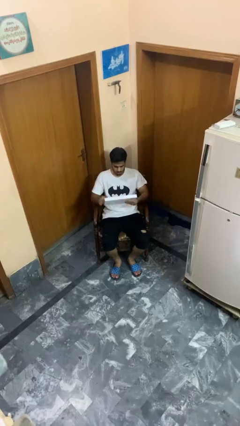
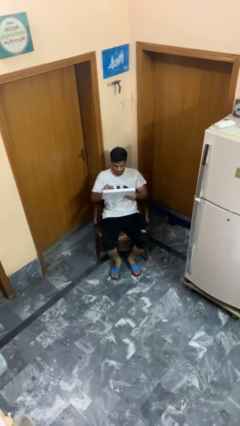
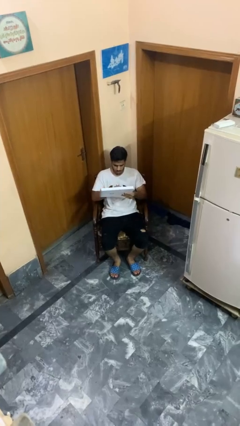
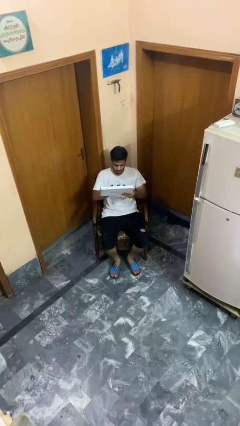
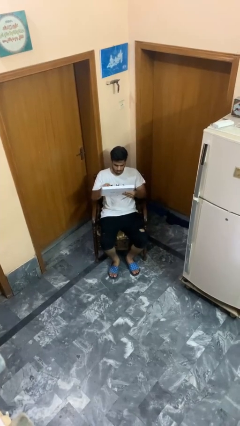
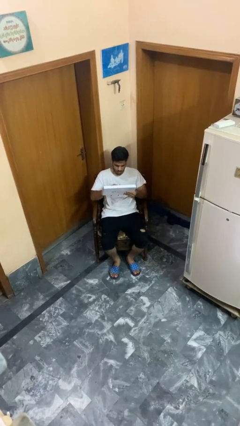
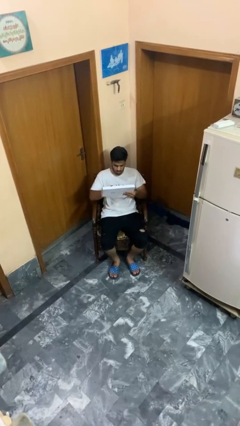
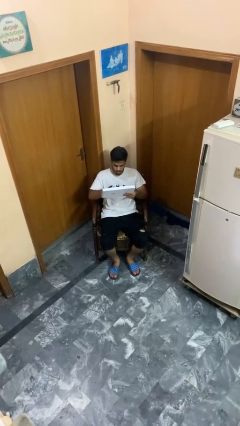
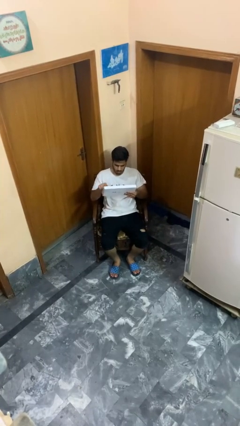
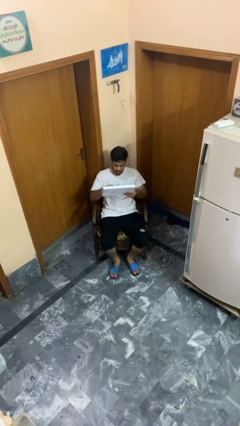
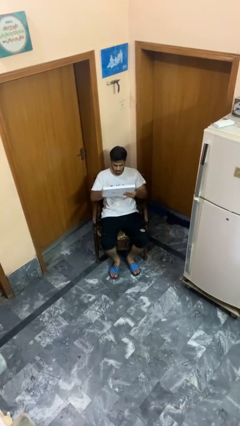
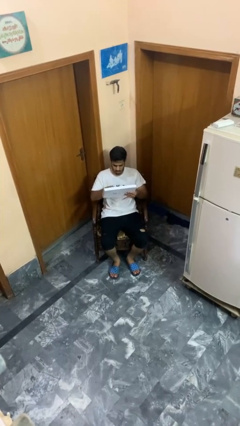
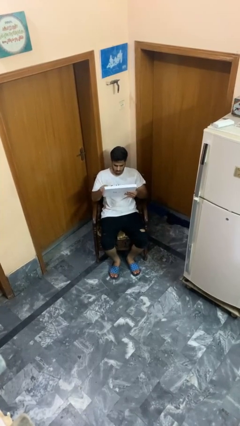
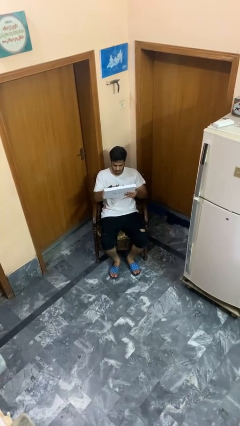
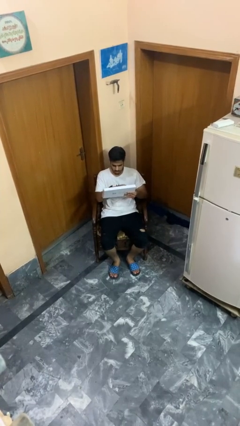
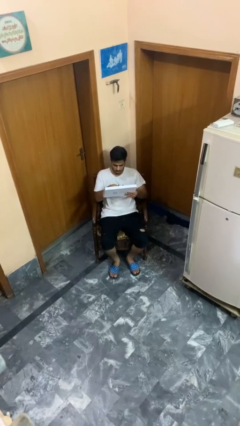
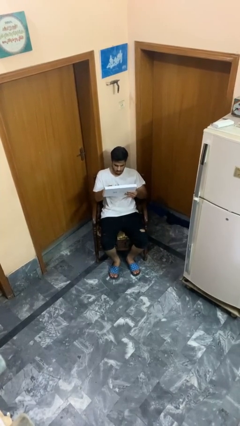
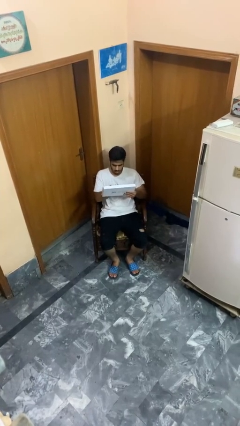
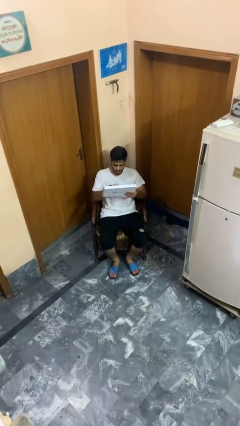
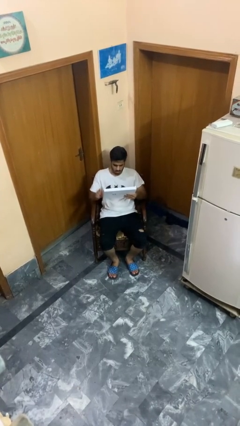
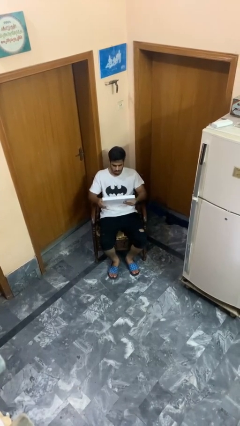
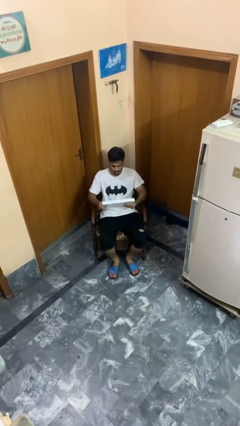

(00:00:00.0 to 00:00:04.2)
person interacts with tablet

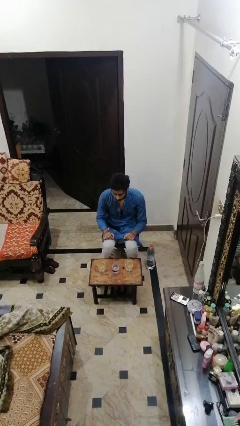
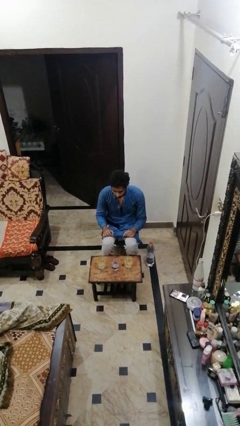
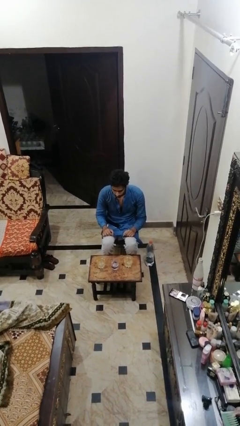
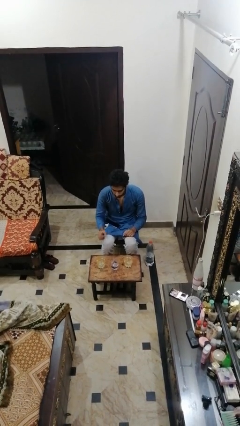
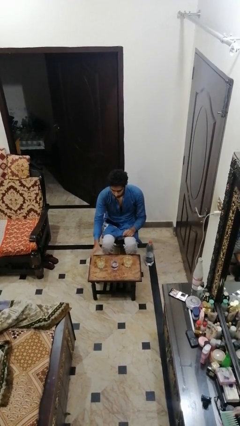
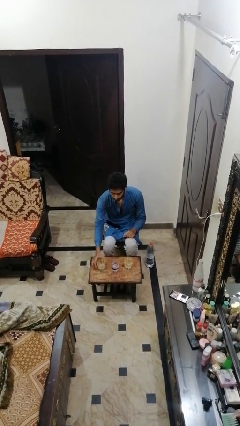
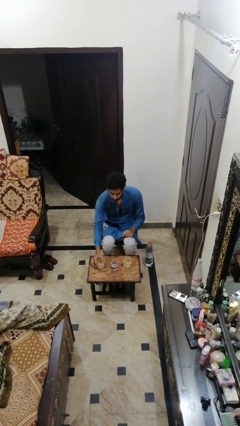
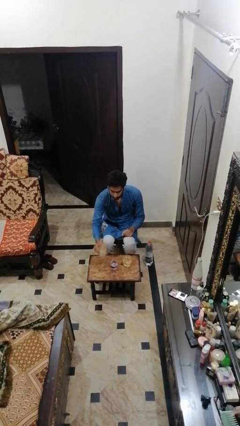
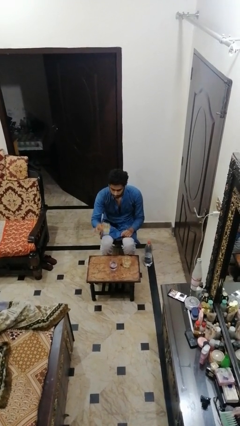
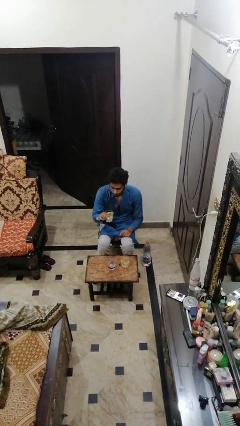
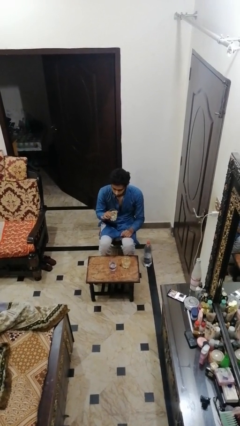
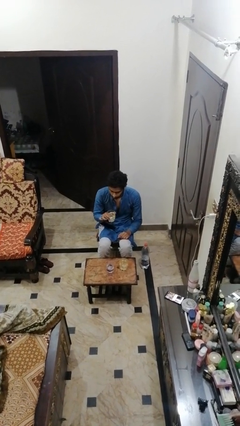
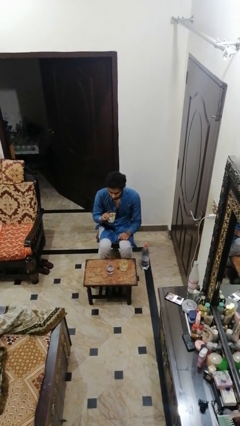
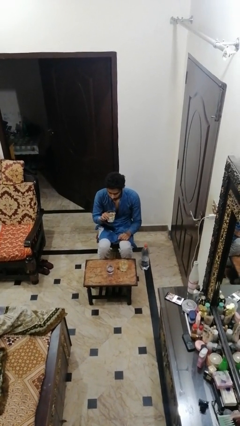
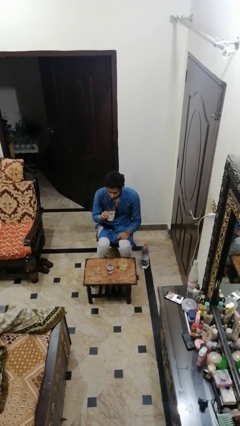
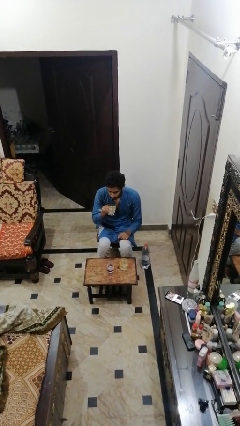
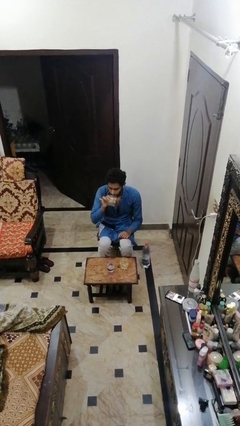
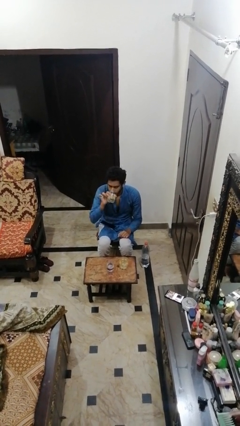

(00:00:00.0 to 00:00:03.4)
person picks up object from table

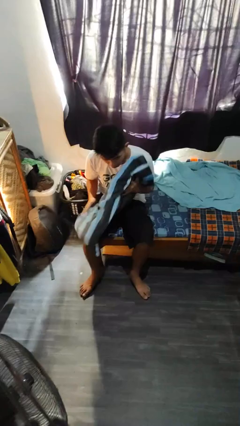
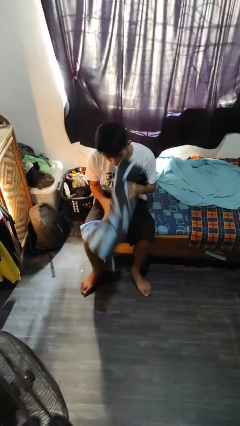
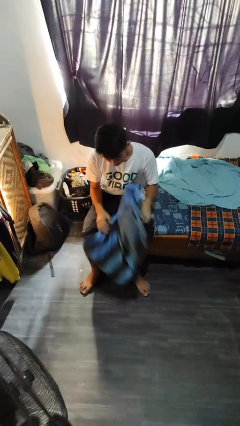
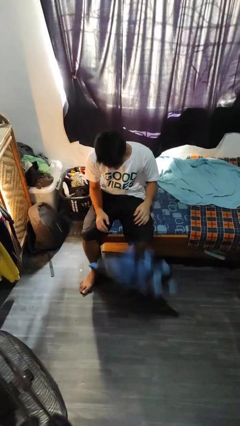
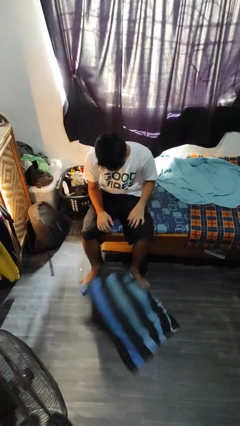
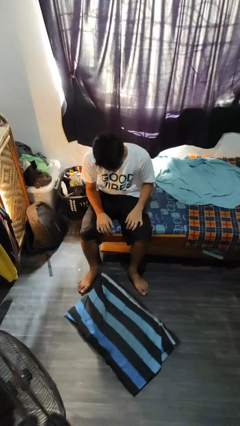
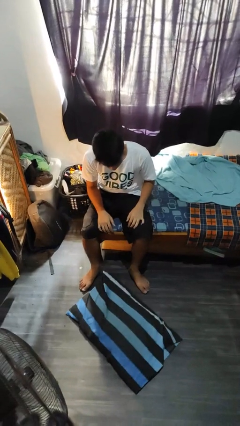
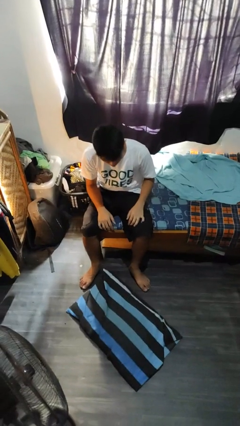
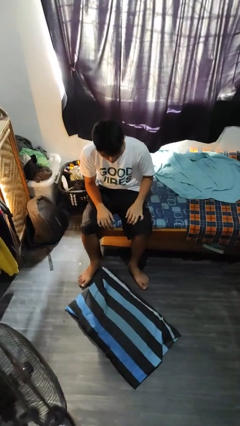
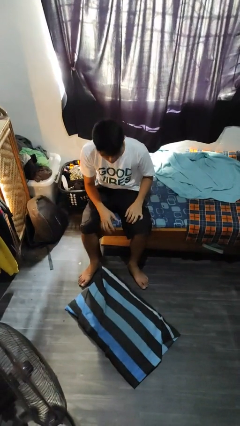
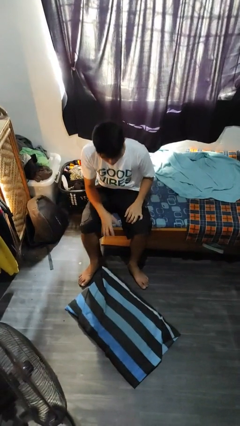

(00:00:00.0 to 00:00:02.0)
person drops object

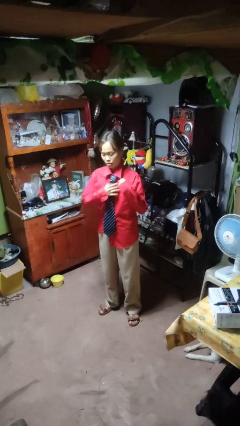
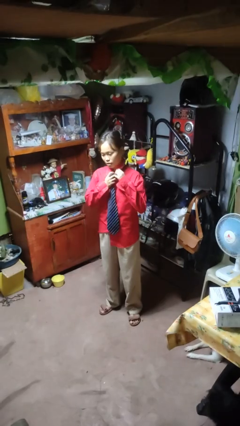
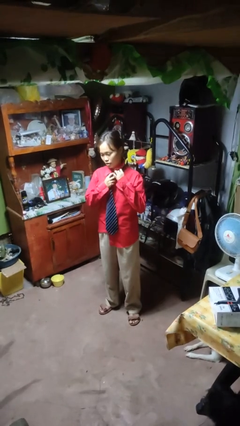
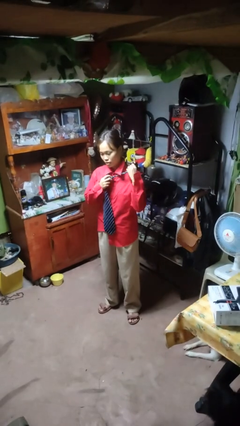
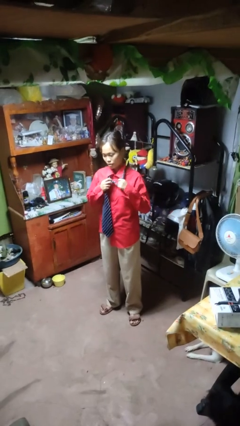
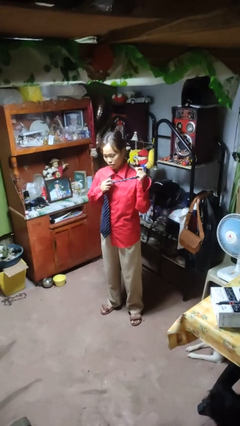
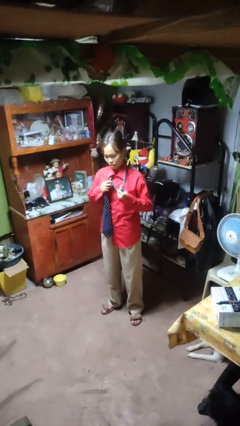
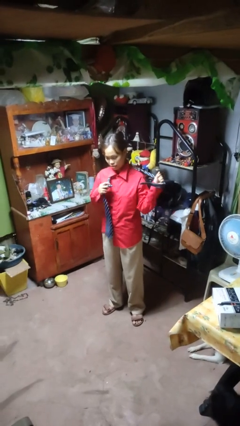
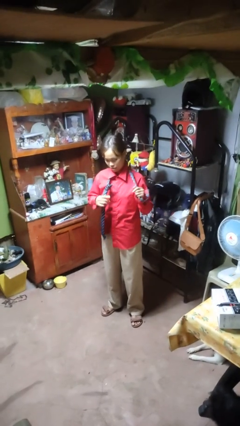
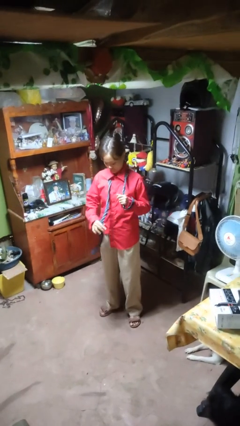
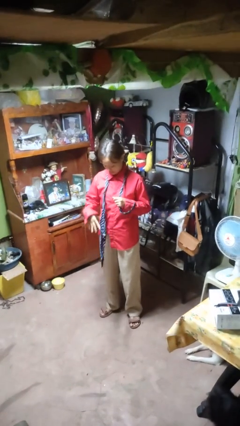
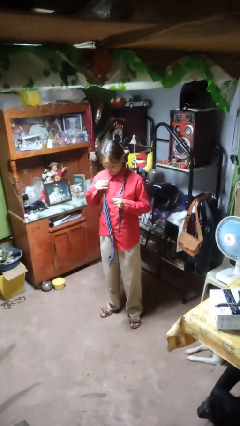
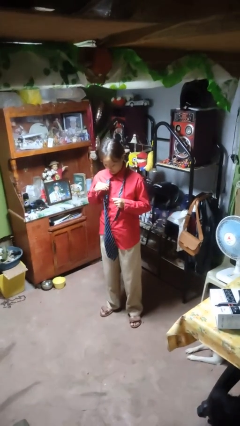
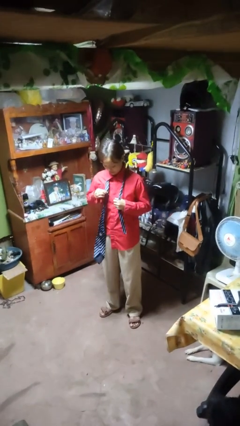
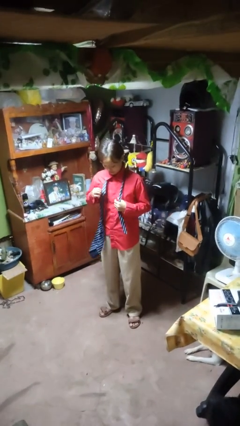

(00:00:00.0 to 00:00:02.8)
person takes off necktie

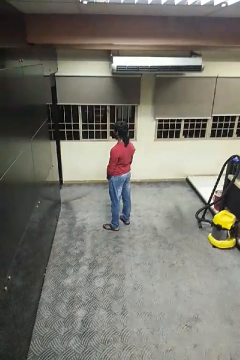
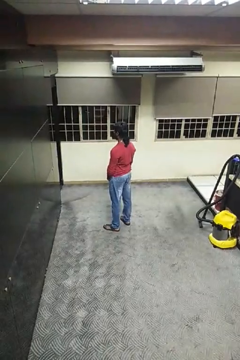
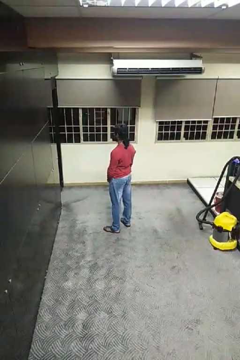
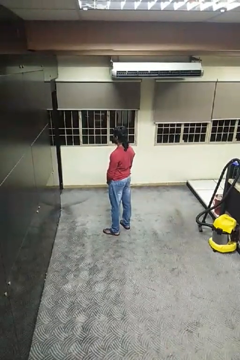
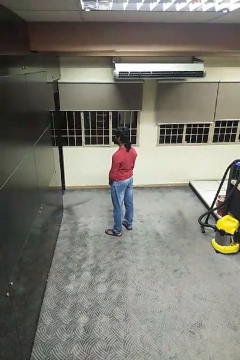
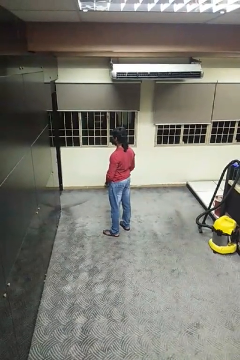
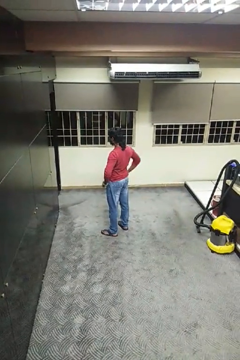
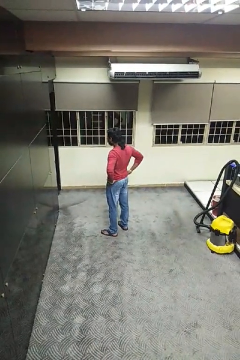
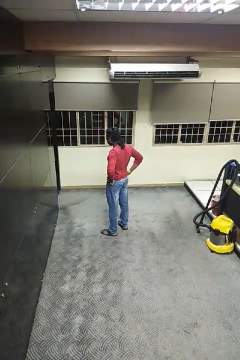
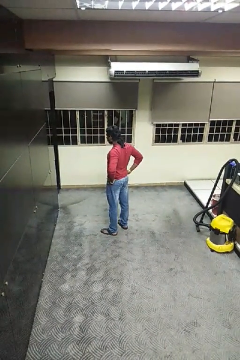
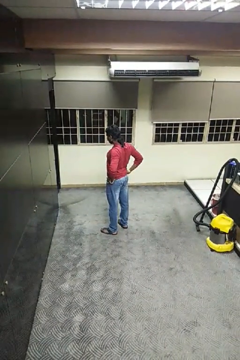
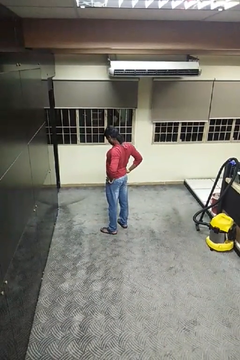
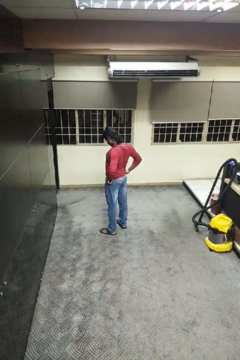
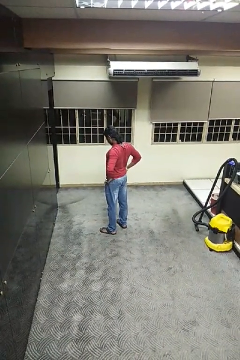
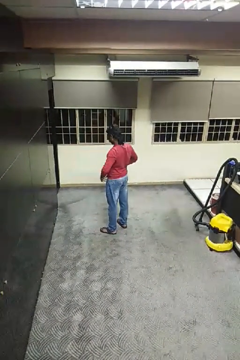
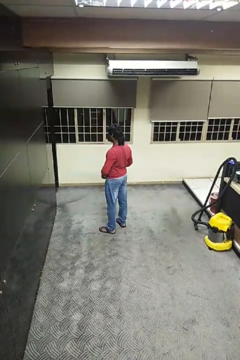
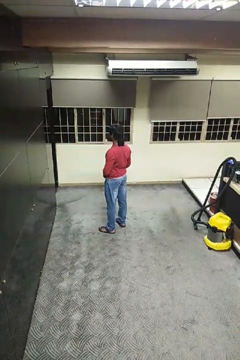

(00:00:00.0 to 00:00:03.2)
person stretches back

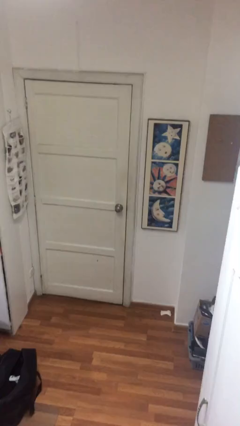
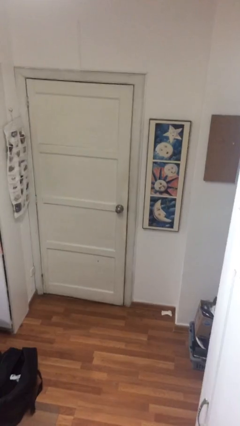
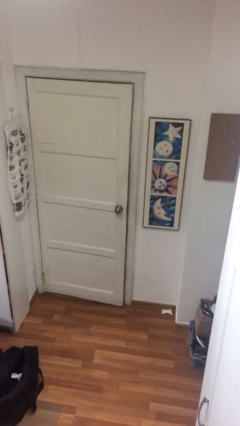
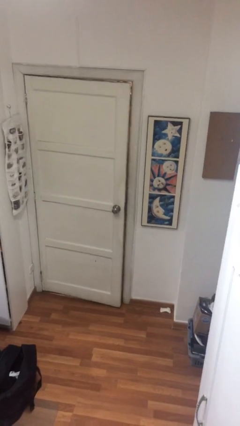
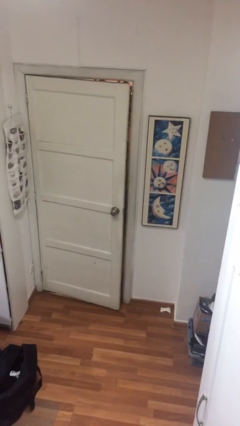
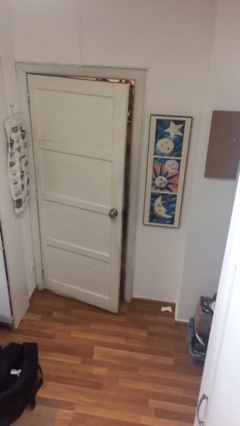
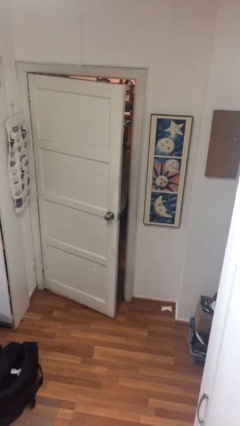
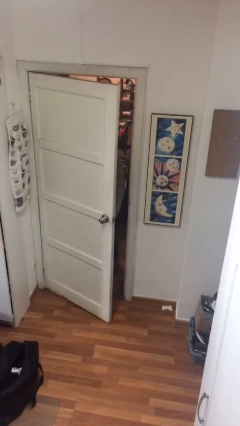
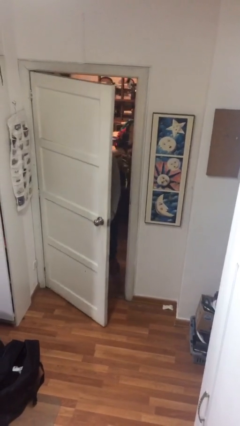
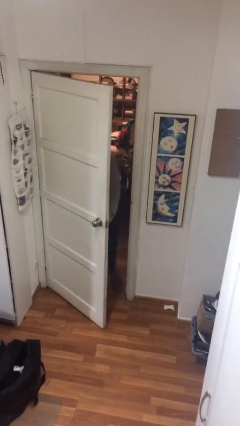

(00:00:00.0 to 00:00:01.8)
person opens facility door

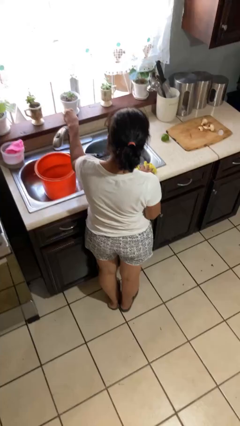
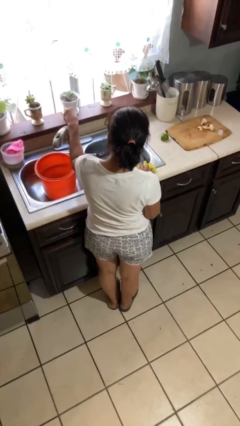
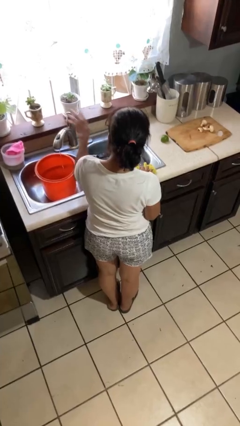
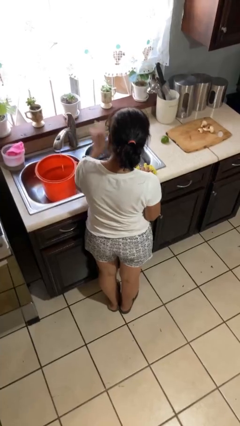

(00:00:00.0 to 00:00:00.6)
person turns on faucet
